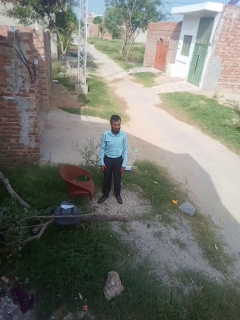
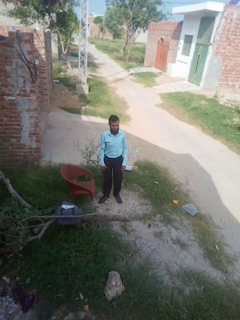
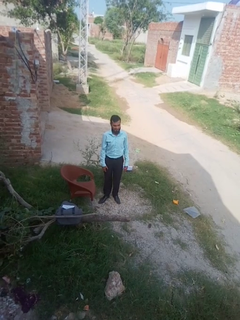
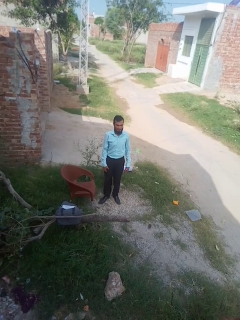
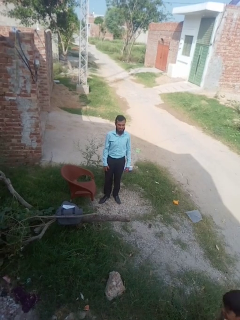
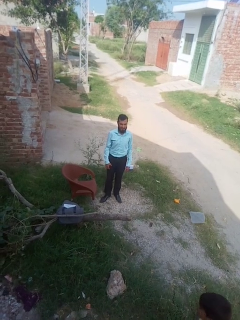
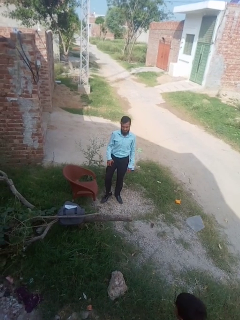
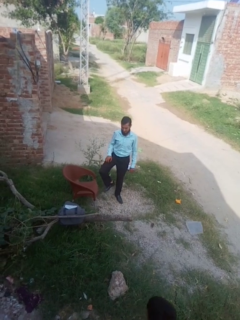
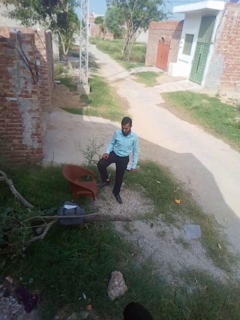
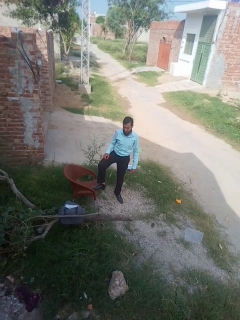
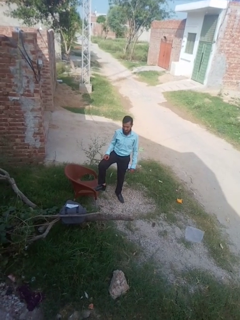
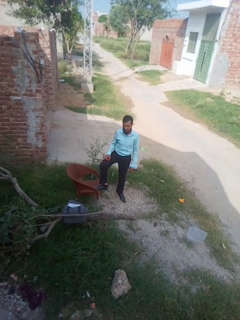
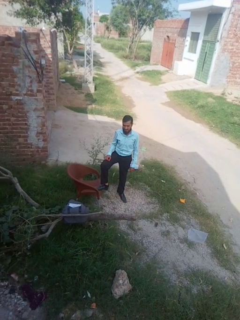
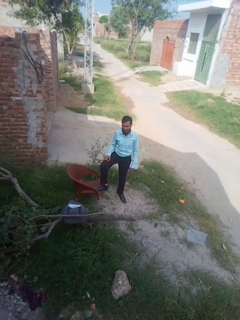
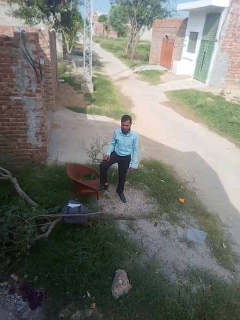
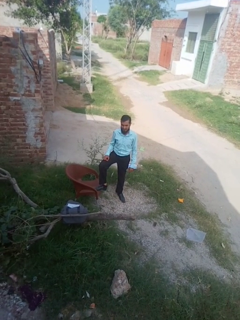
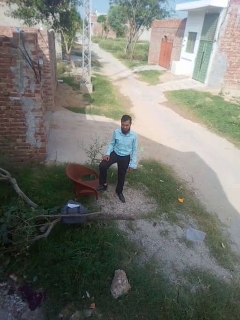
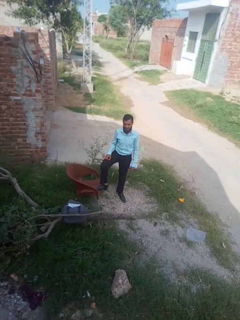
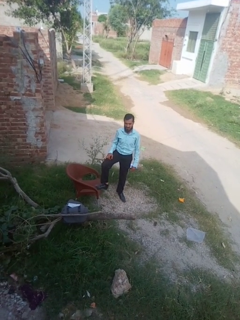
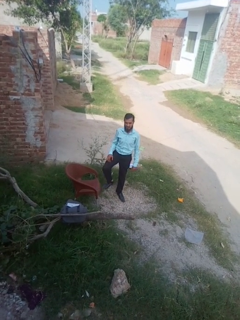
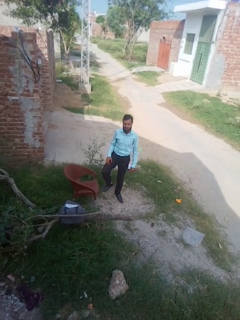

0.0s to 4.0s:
person puts feet up

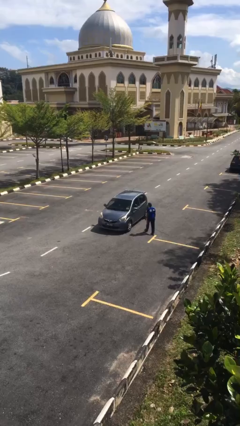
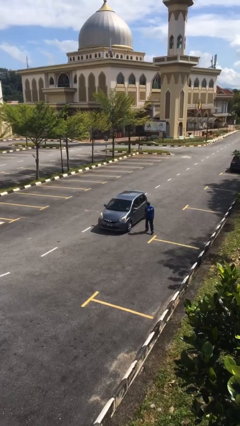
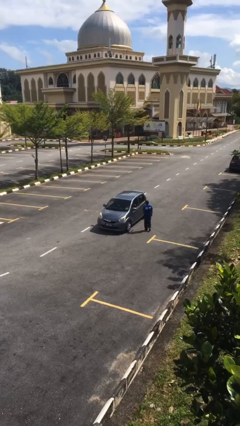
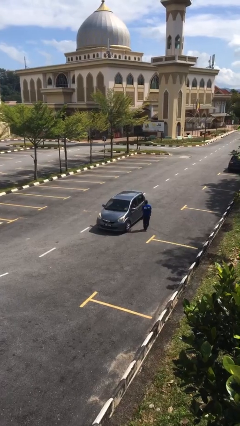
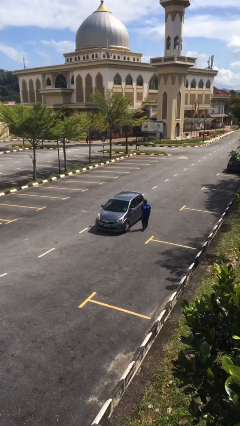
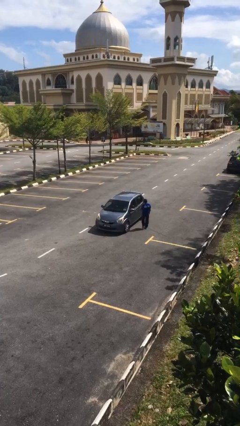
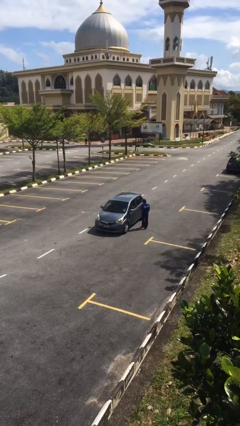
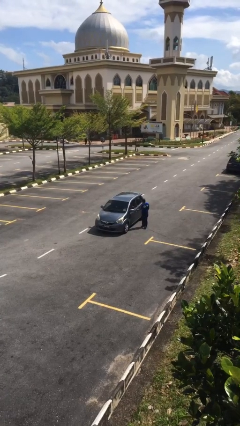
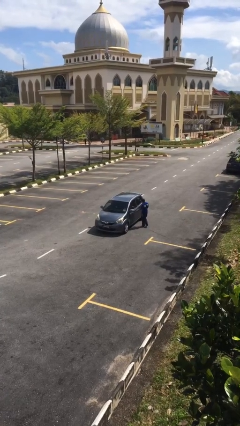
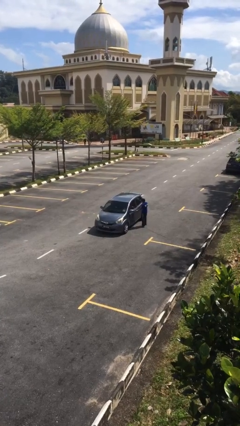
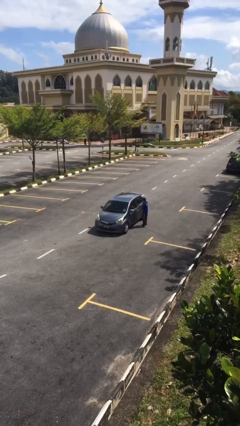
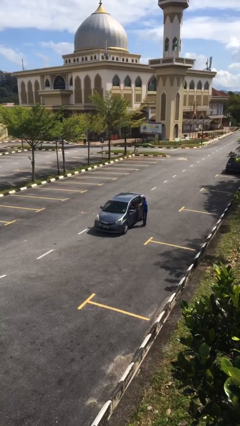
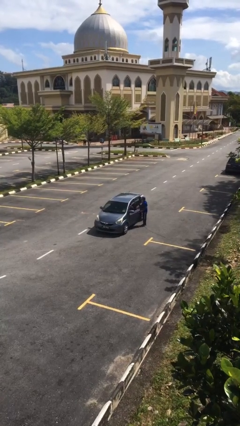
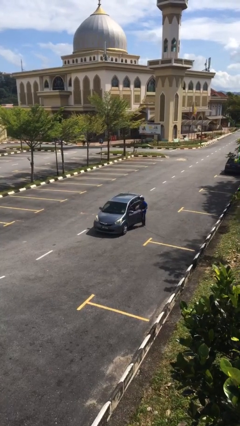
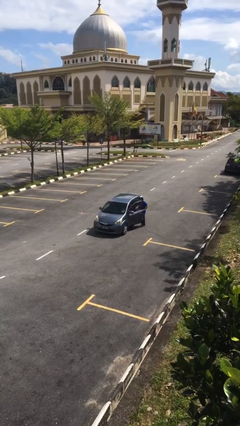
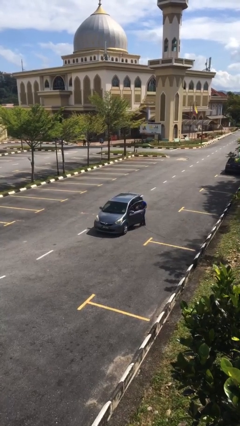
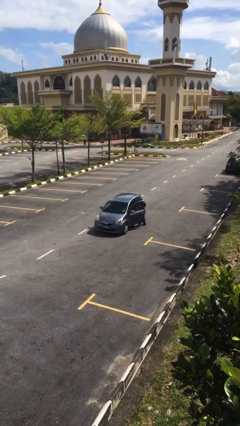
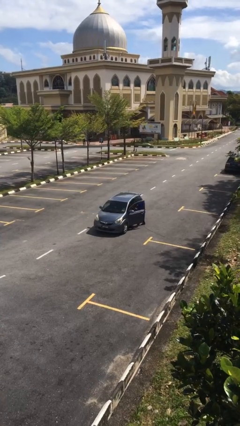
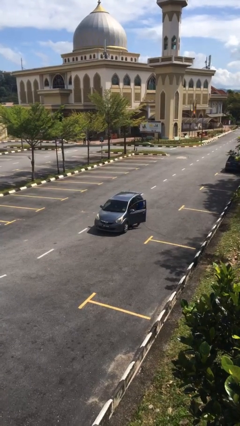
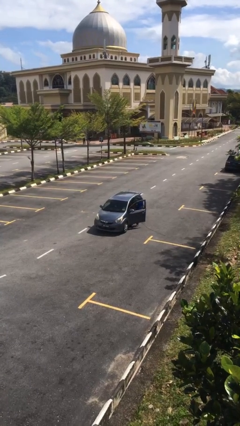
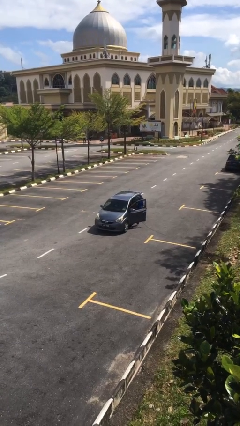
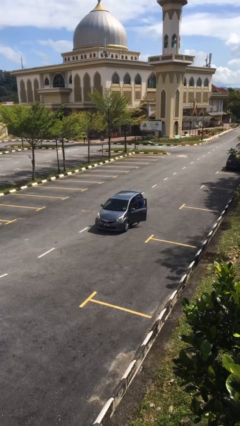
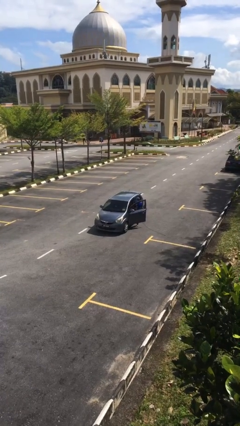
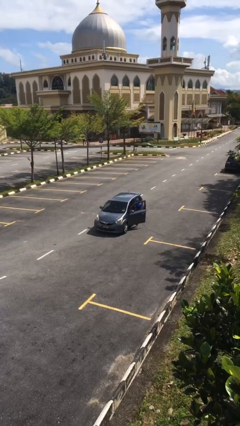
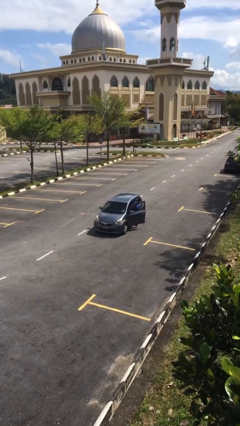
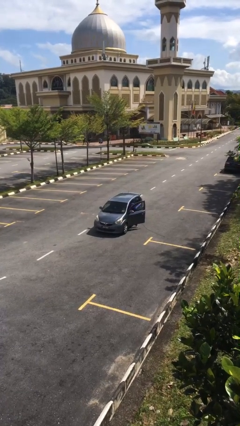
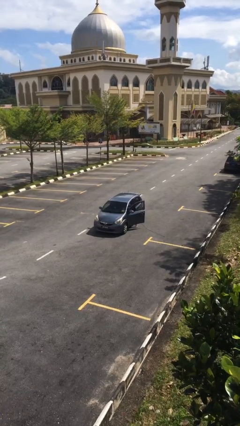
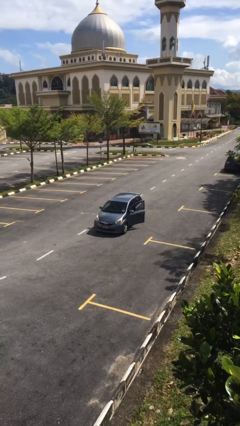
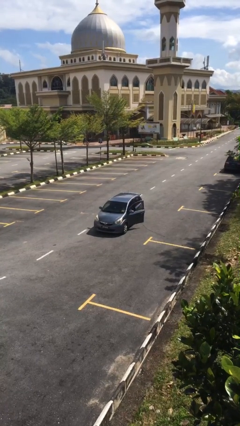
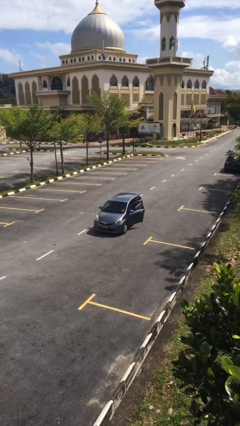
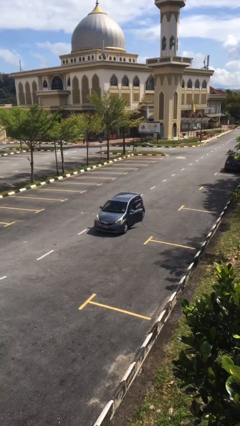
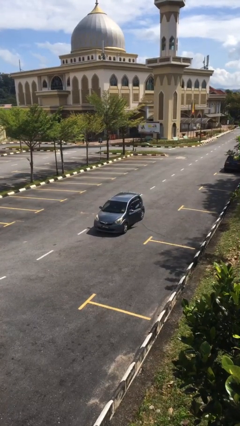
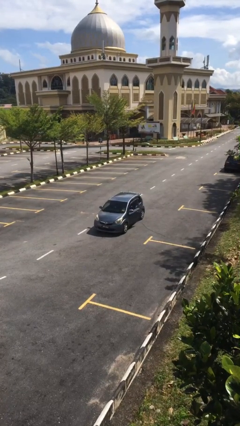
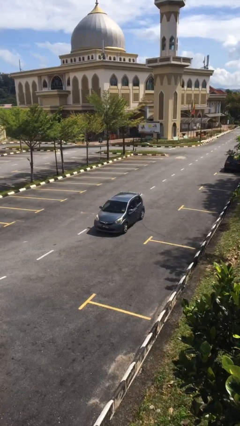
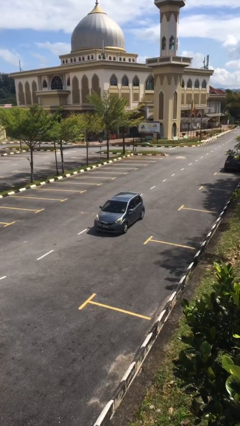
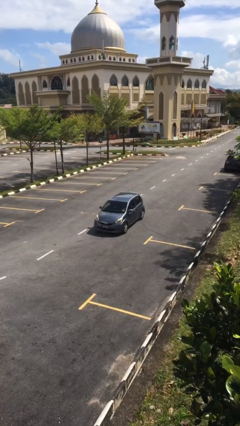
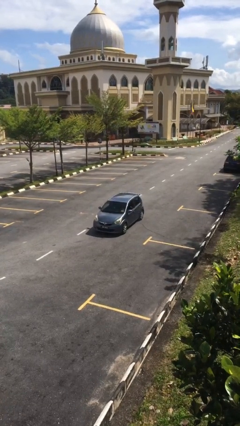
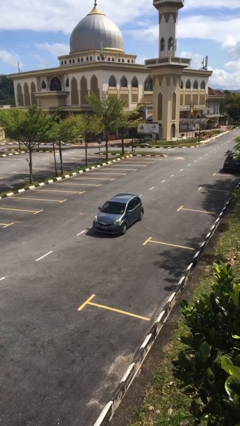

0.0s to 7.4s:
car picks up person

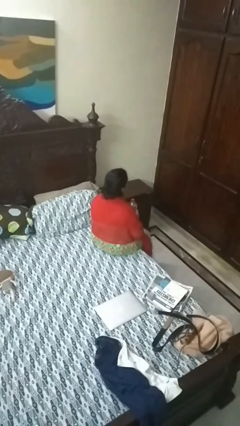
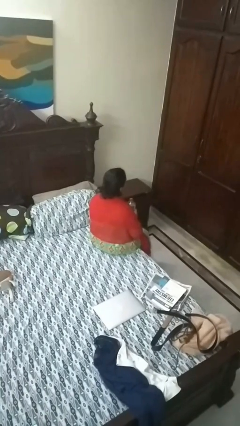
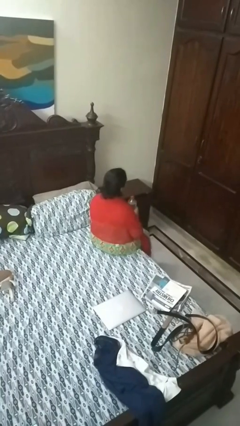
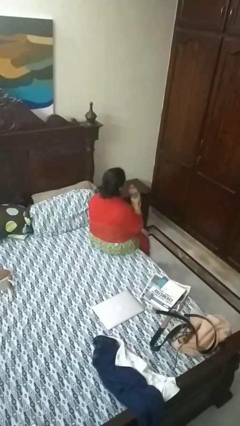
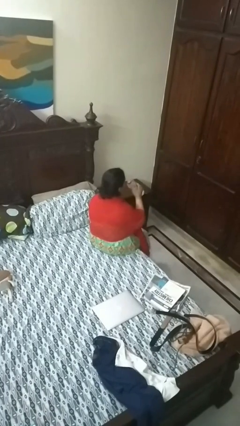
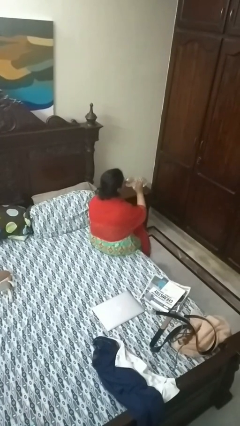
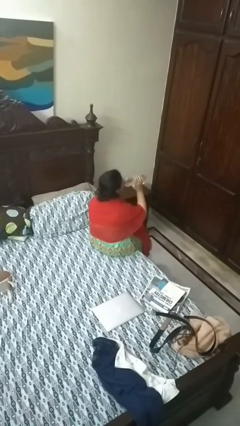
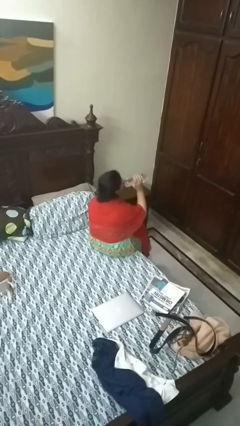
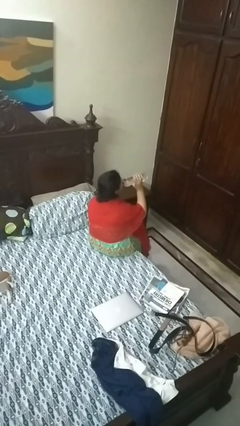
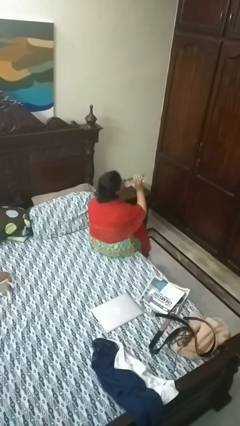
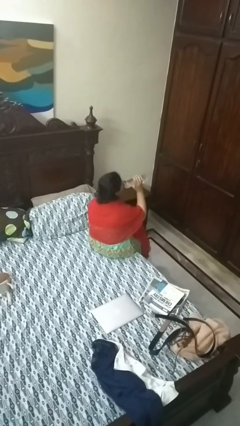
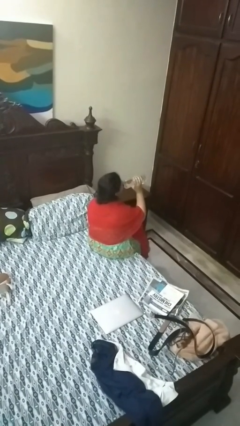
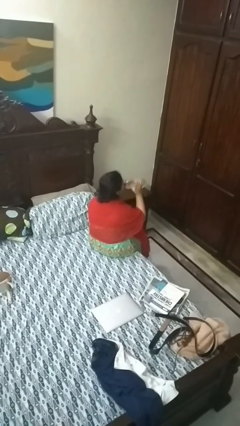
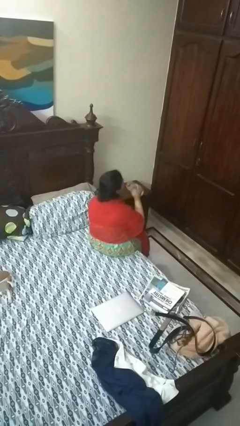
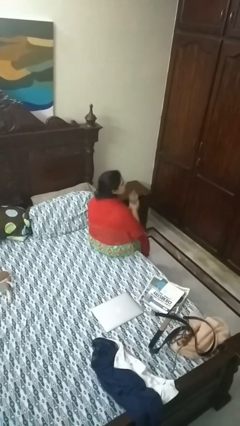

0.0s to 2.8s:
person drinks from bottle

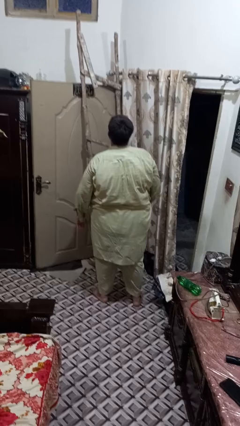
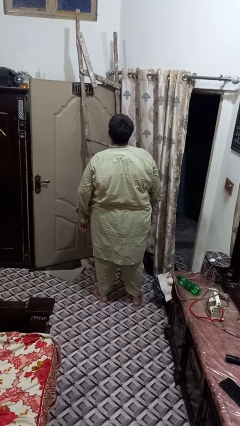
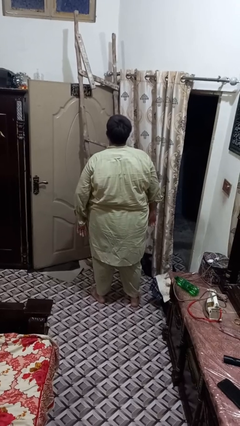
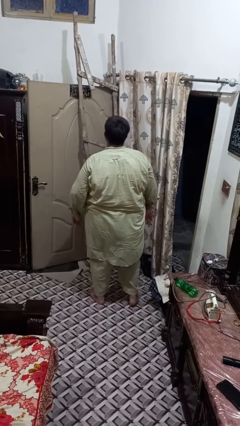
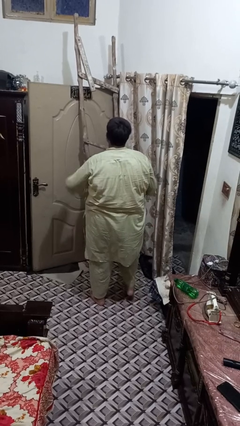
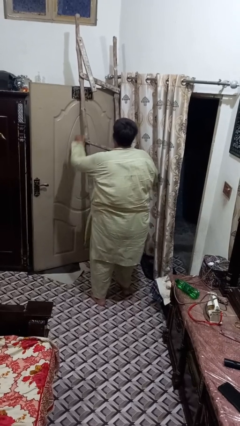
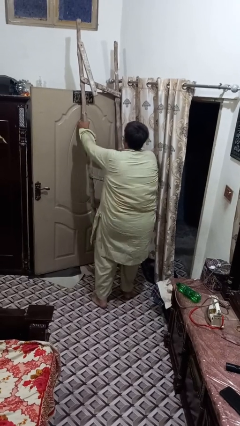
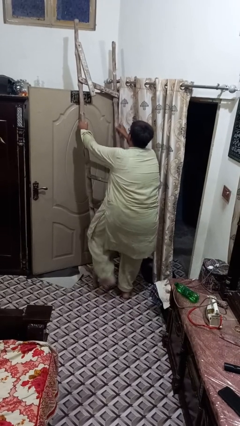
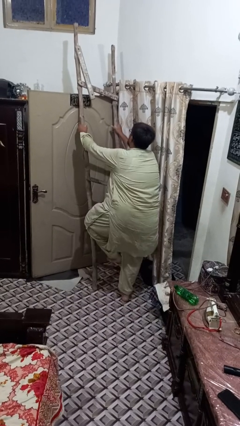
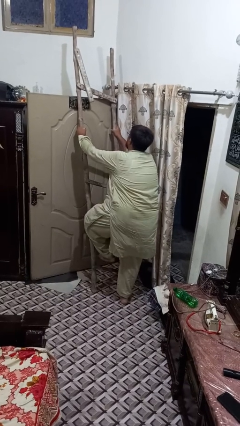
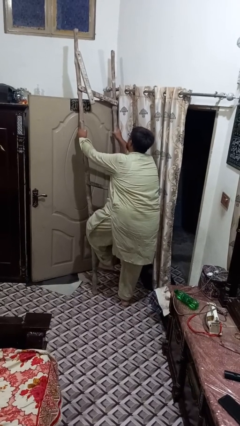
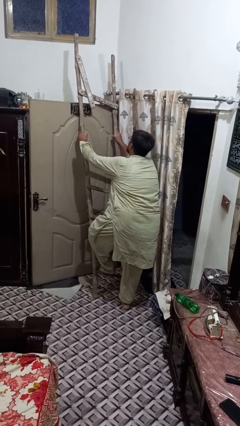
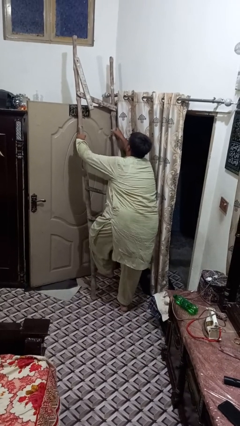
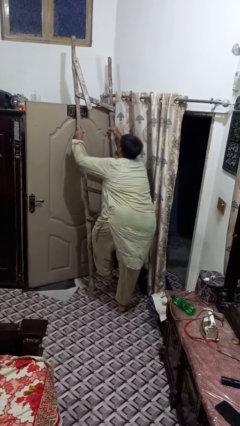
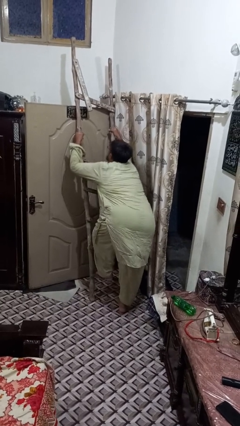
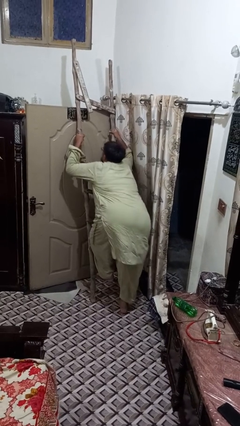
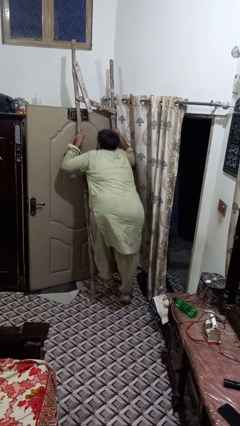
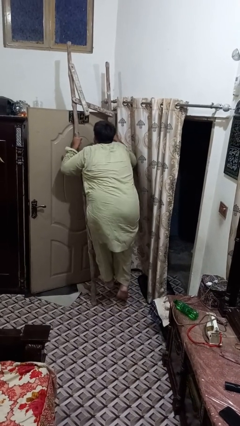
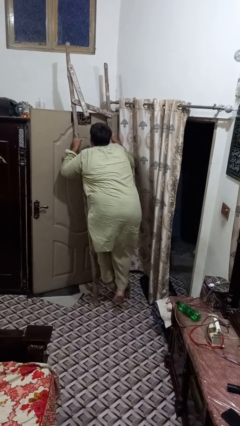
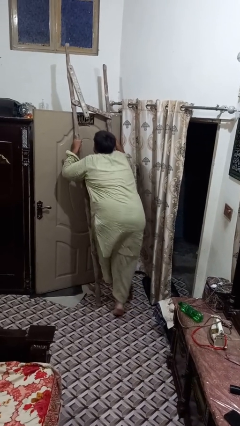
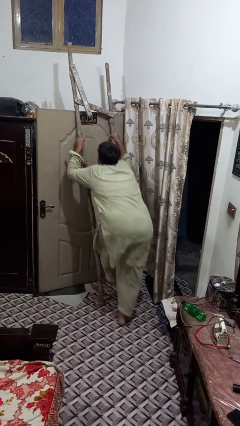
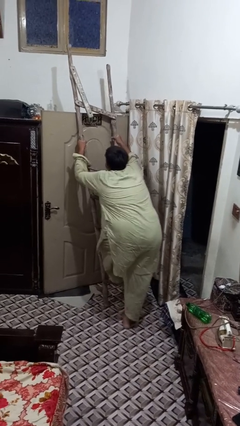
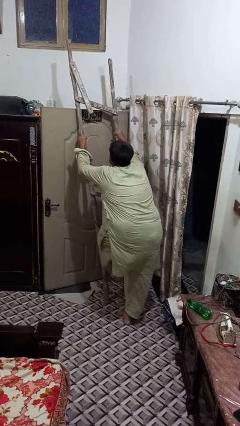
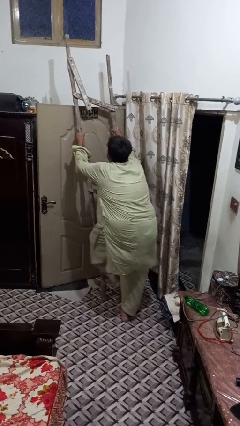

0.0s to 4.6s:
person climbs up ladder
